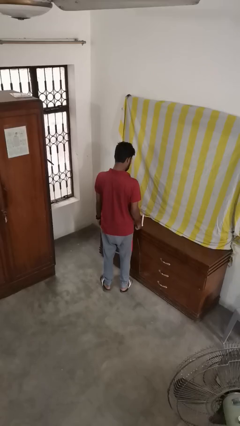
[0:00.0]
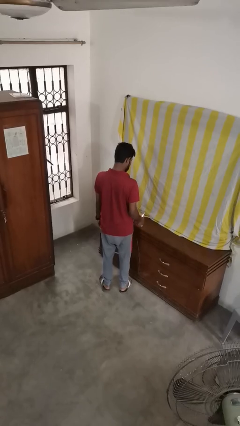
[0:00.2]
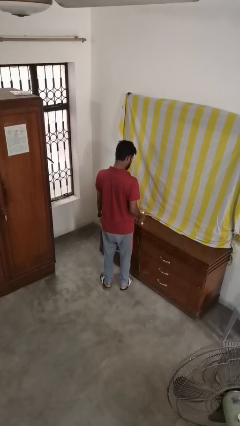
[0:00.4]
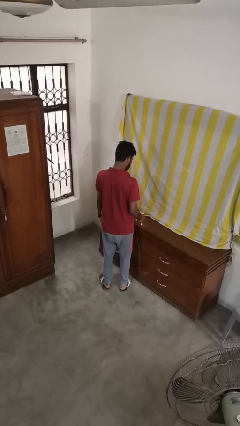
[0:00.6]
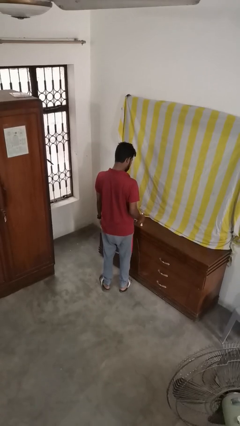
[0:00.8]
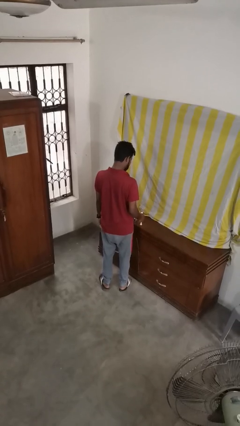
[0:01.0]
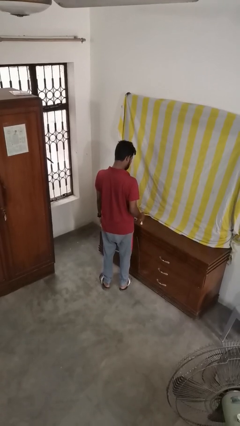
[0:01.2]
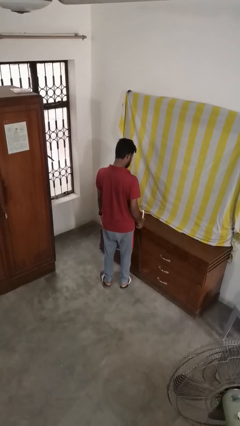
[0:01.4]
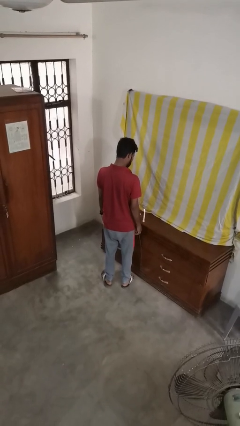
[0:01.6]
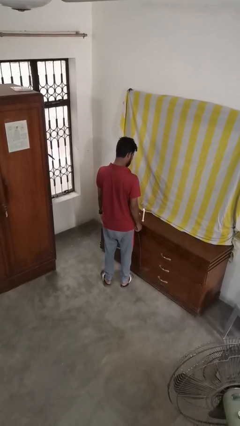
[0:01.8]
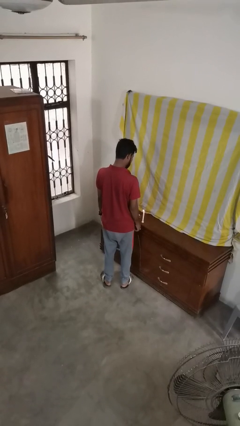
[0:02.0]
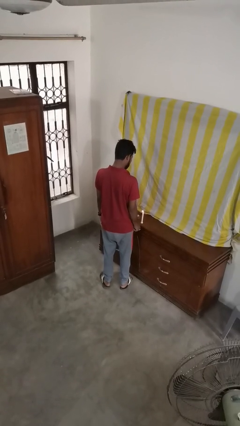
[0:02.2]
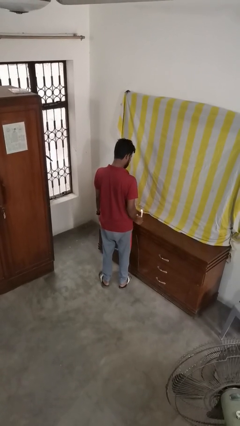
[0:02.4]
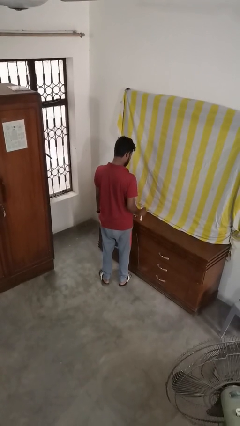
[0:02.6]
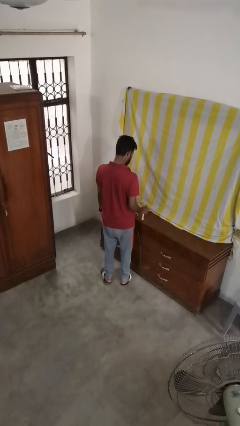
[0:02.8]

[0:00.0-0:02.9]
person lights candle

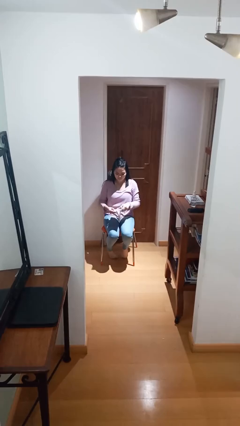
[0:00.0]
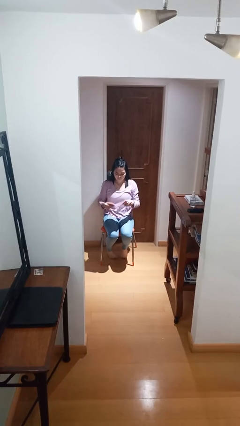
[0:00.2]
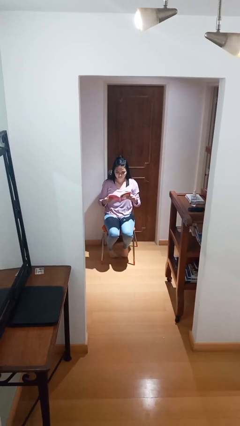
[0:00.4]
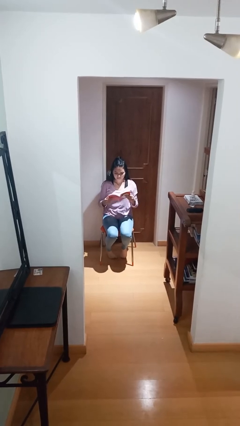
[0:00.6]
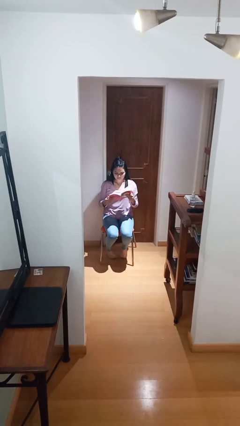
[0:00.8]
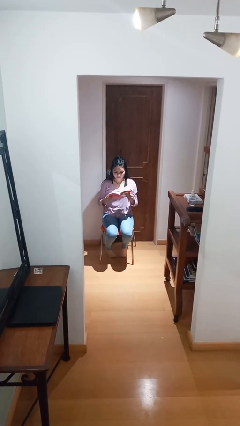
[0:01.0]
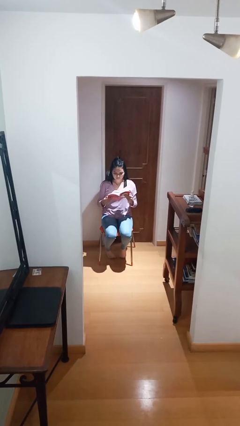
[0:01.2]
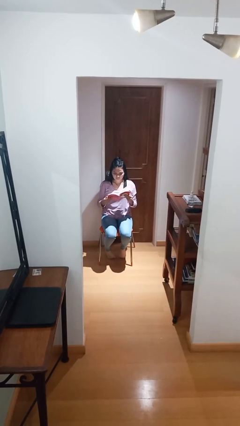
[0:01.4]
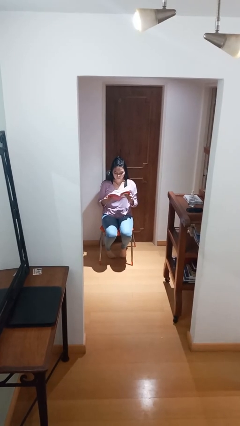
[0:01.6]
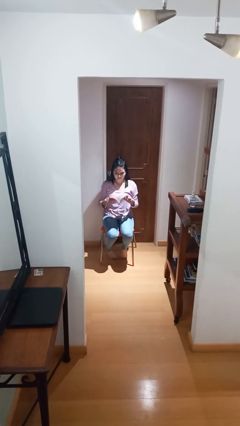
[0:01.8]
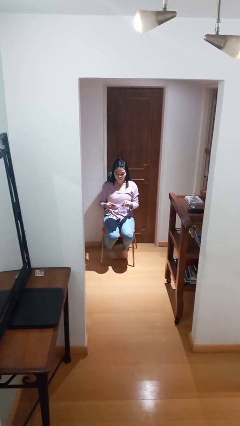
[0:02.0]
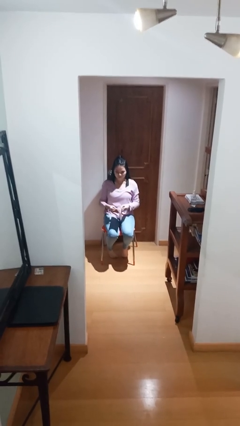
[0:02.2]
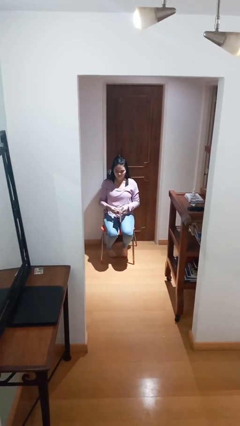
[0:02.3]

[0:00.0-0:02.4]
person reads document

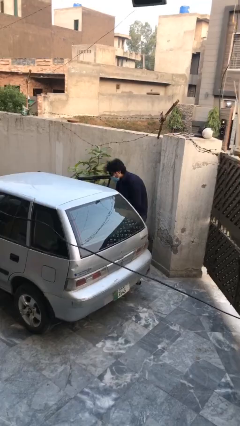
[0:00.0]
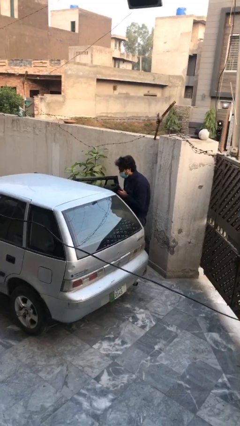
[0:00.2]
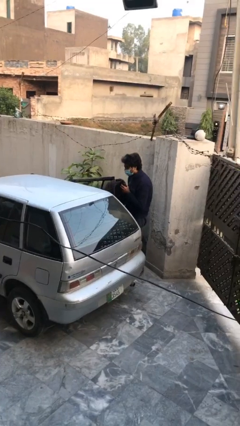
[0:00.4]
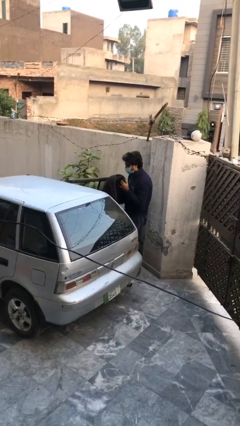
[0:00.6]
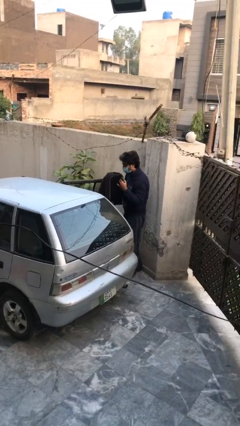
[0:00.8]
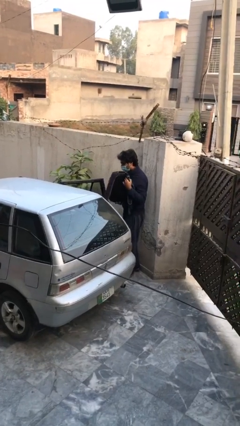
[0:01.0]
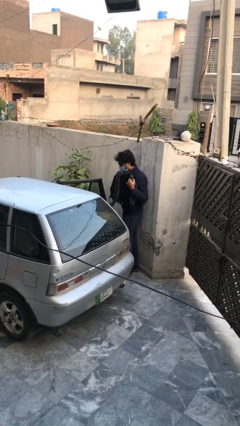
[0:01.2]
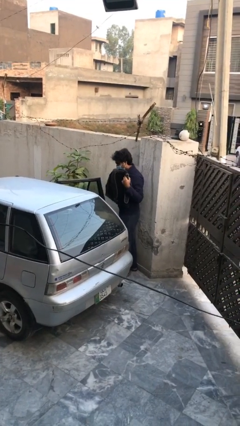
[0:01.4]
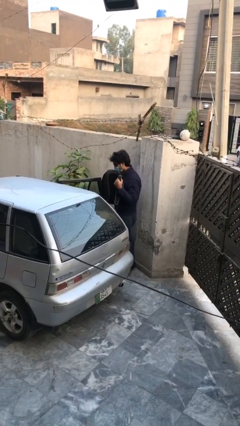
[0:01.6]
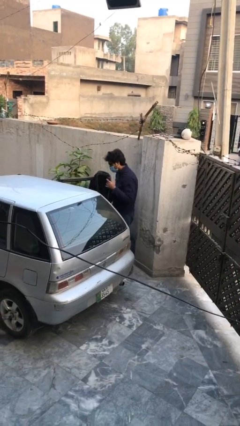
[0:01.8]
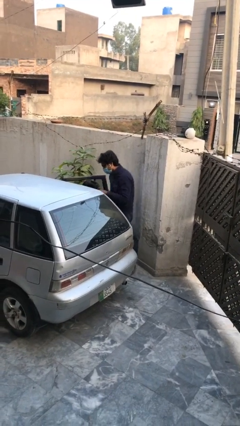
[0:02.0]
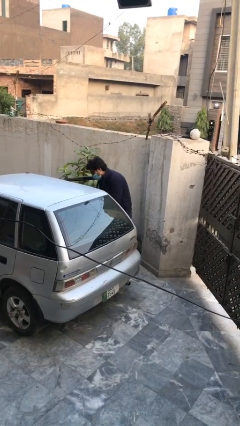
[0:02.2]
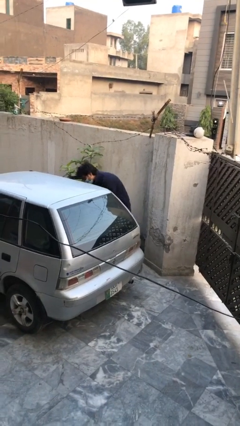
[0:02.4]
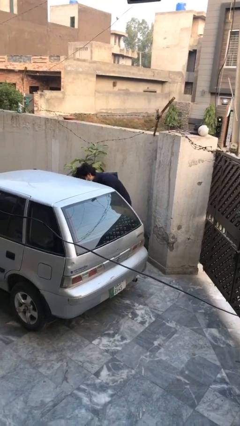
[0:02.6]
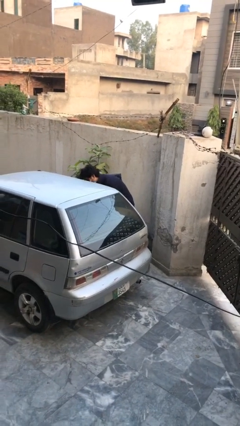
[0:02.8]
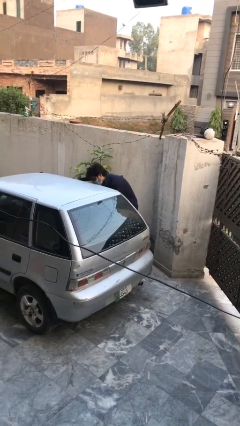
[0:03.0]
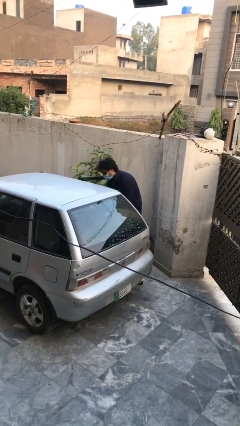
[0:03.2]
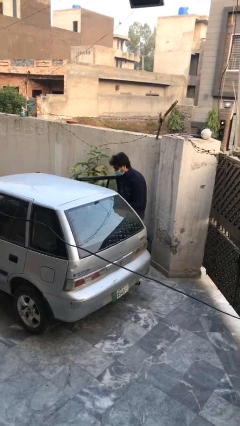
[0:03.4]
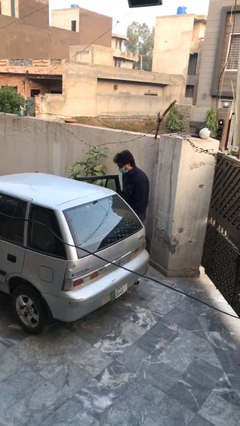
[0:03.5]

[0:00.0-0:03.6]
person loads car

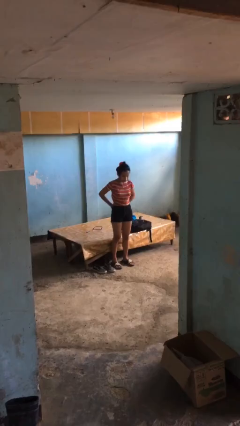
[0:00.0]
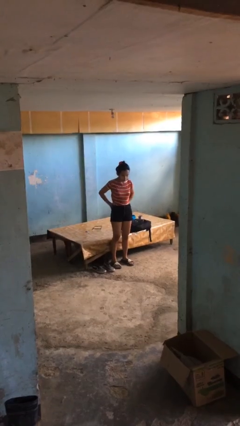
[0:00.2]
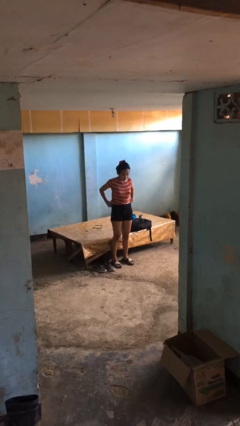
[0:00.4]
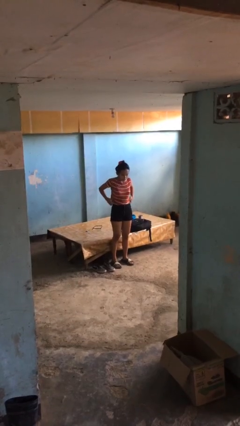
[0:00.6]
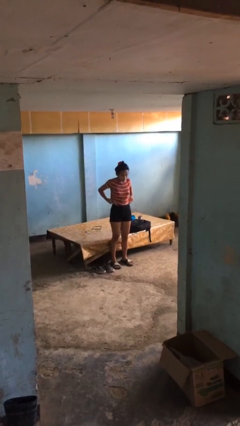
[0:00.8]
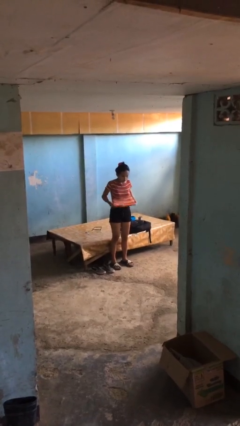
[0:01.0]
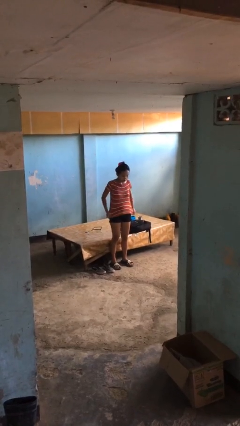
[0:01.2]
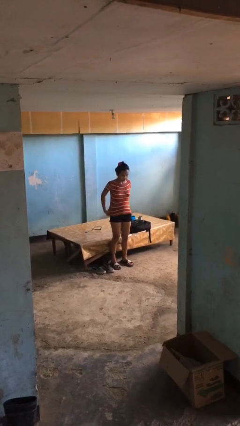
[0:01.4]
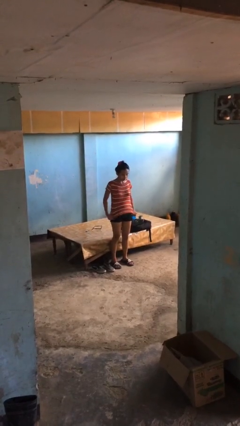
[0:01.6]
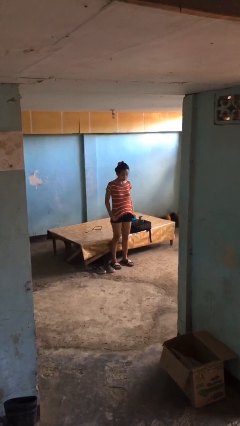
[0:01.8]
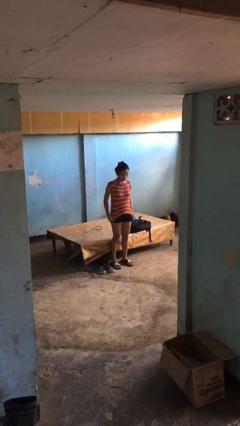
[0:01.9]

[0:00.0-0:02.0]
person untucks shirt

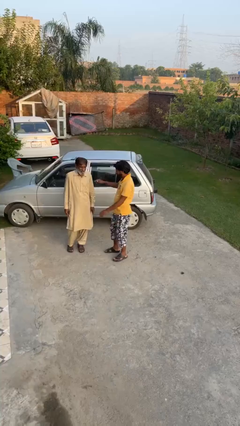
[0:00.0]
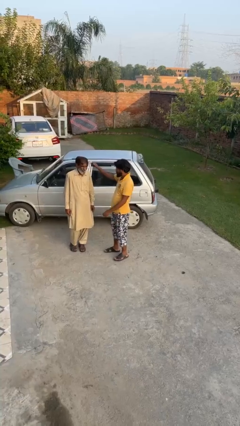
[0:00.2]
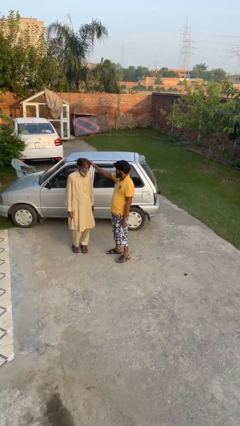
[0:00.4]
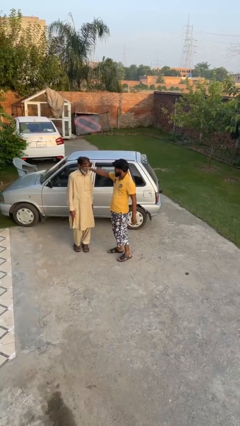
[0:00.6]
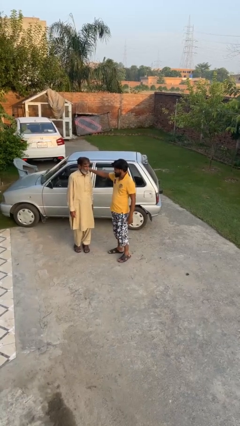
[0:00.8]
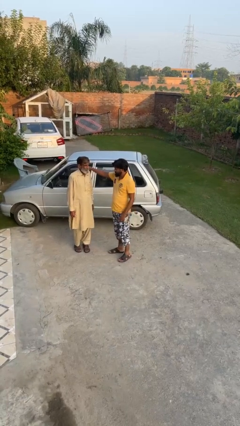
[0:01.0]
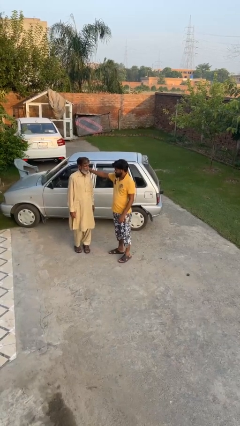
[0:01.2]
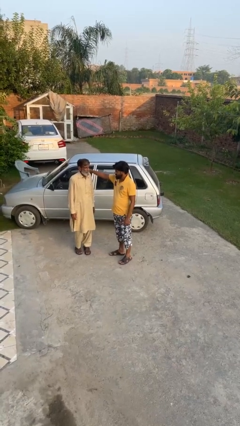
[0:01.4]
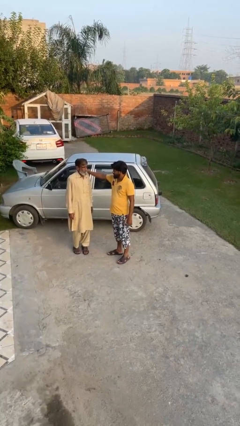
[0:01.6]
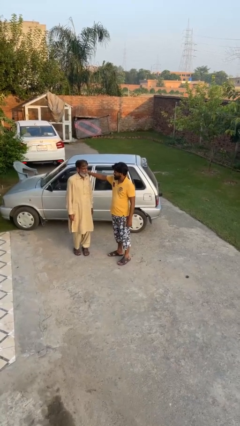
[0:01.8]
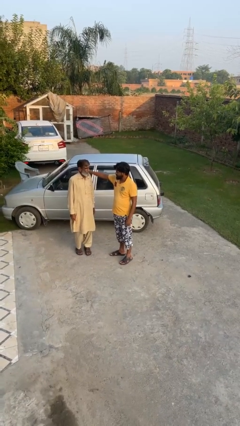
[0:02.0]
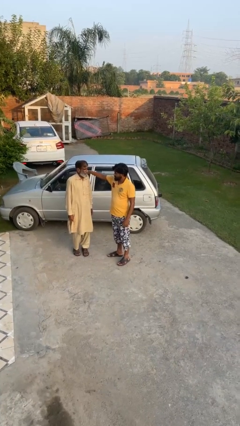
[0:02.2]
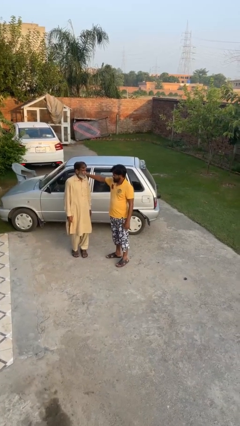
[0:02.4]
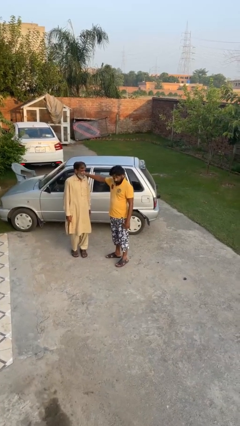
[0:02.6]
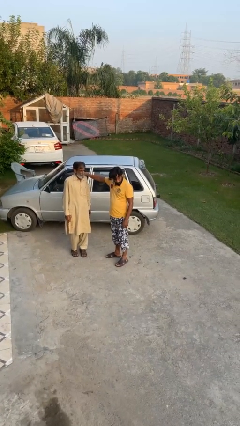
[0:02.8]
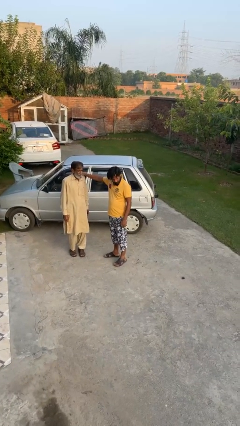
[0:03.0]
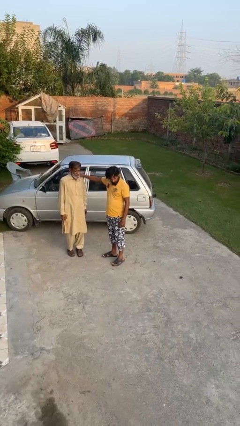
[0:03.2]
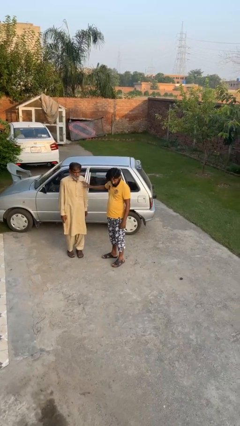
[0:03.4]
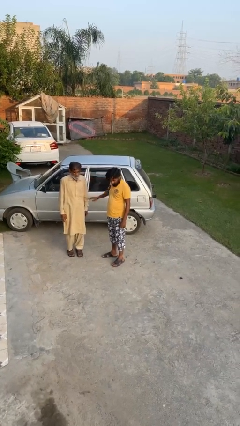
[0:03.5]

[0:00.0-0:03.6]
person pounds shoulders of person

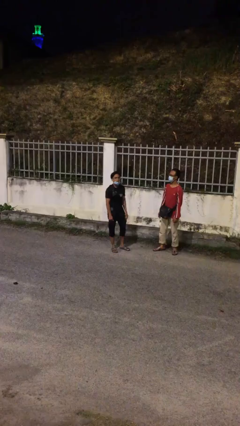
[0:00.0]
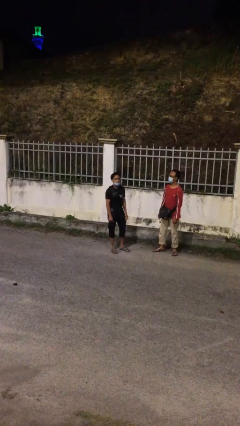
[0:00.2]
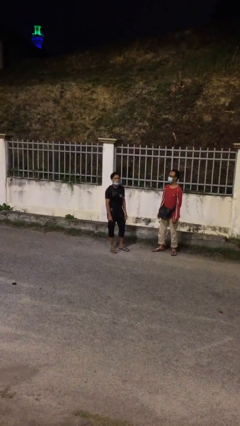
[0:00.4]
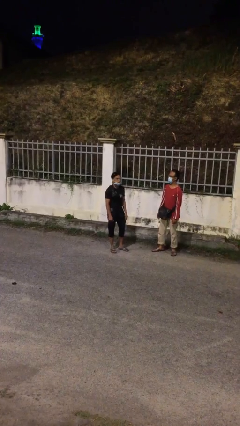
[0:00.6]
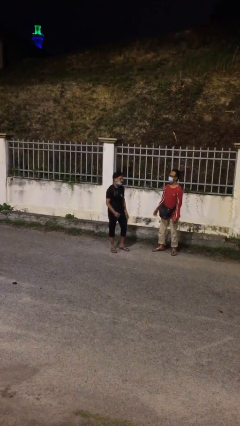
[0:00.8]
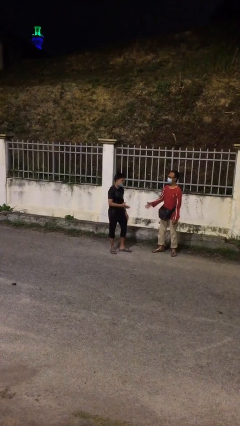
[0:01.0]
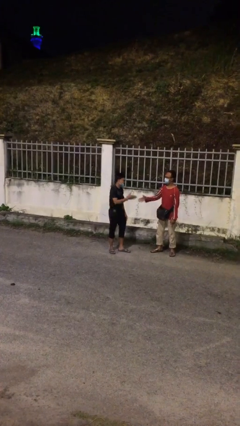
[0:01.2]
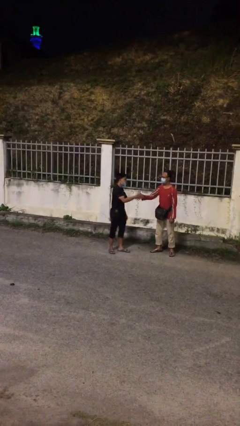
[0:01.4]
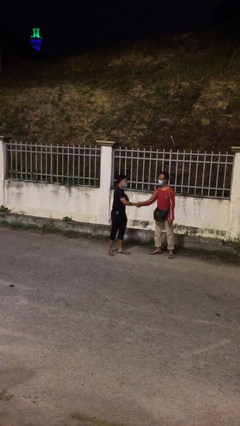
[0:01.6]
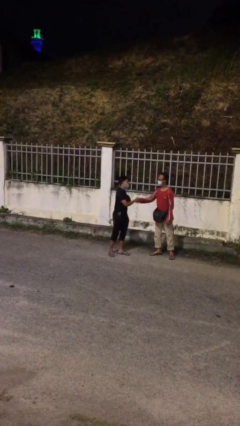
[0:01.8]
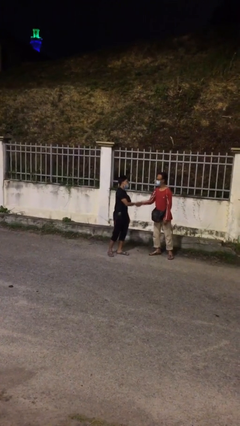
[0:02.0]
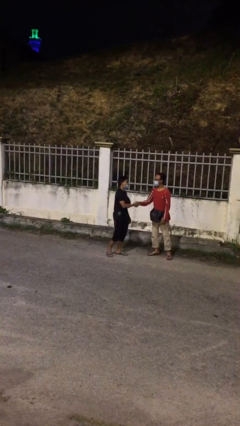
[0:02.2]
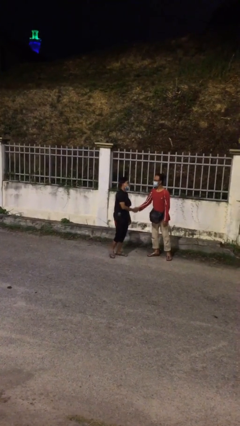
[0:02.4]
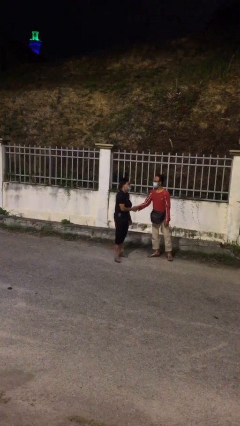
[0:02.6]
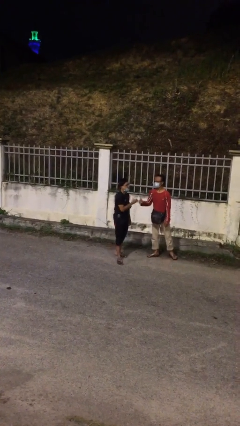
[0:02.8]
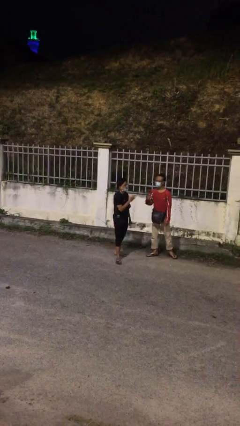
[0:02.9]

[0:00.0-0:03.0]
person shakes hand
